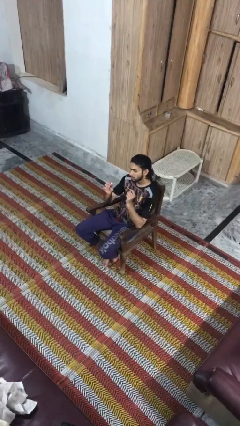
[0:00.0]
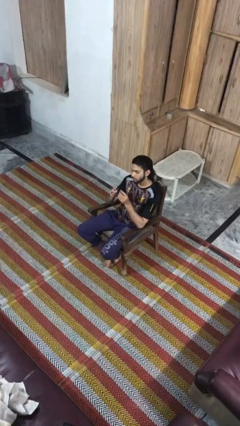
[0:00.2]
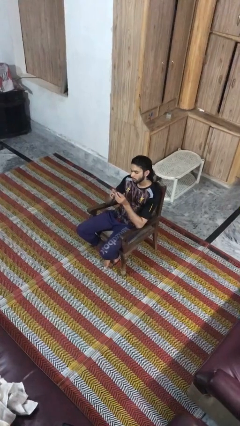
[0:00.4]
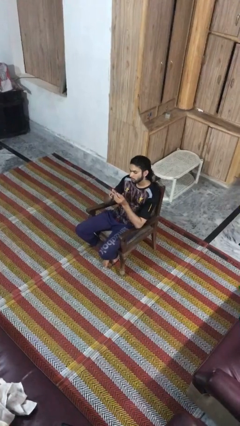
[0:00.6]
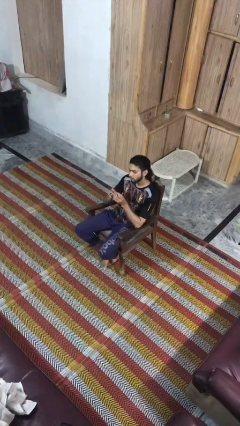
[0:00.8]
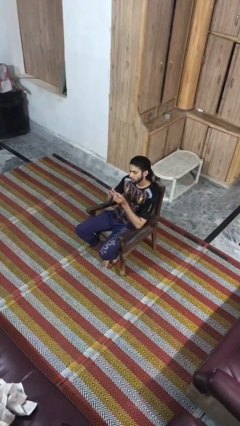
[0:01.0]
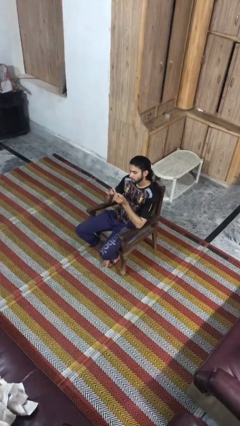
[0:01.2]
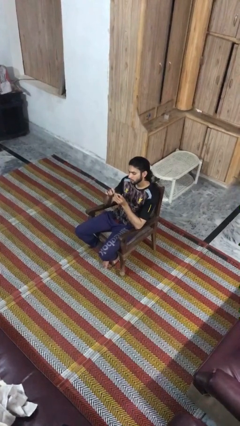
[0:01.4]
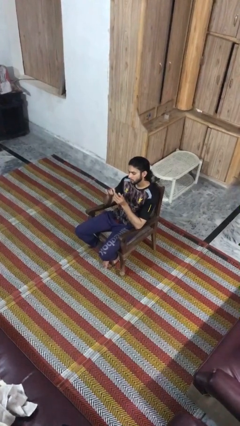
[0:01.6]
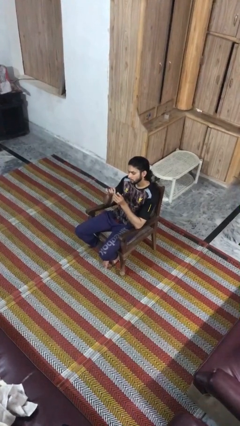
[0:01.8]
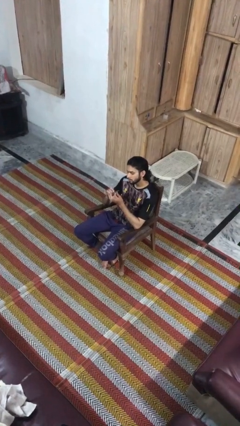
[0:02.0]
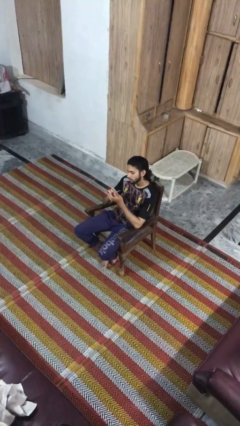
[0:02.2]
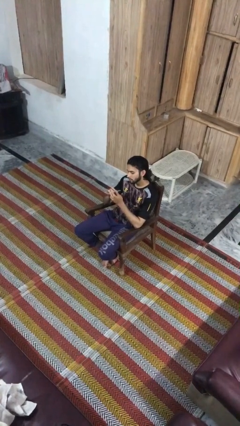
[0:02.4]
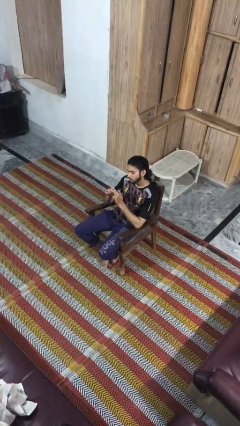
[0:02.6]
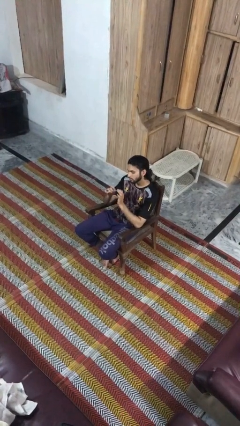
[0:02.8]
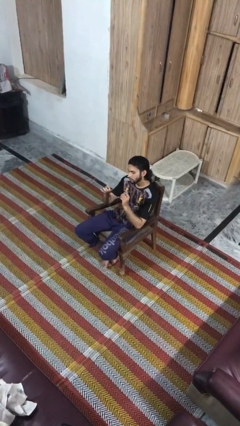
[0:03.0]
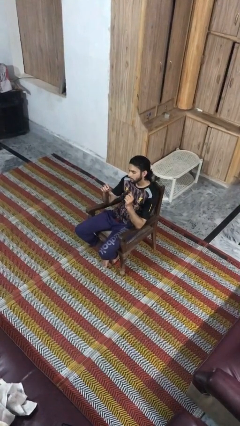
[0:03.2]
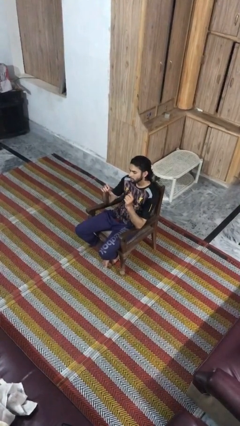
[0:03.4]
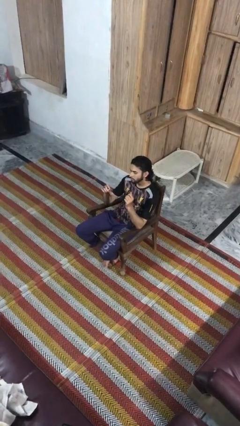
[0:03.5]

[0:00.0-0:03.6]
person files fingernails

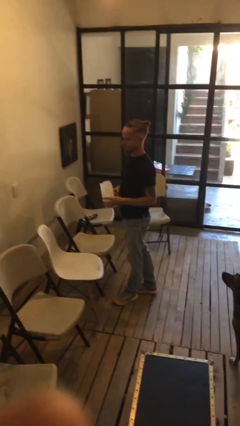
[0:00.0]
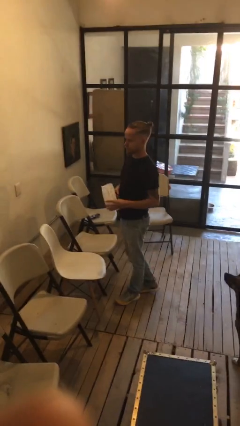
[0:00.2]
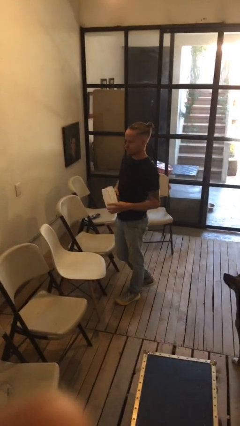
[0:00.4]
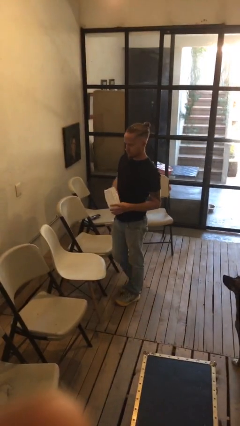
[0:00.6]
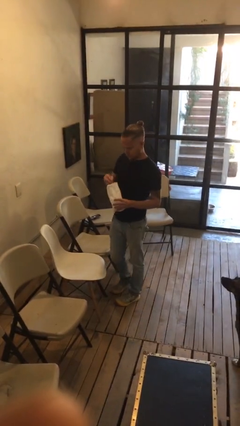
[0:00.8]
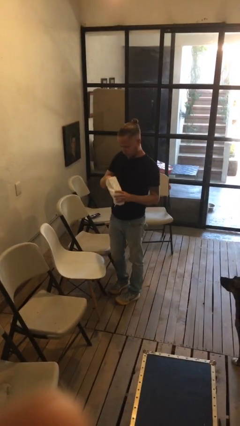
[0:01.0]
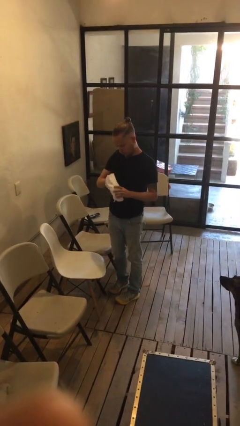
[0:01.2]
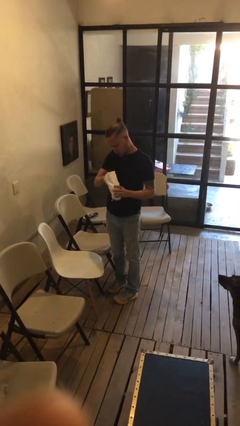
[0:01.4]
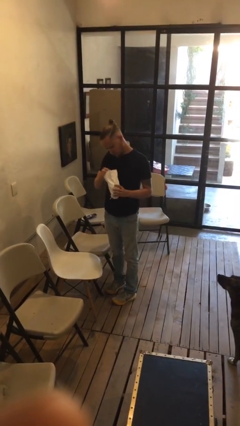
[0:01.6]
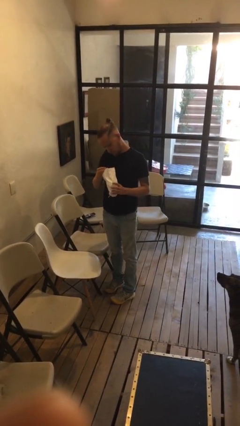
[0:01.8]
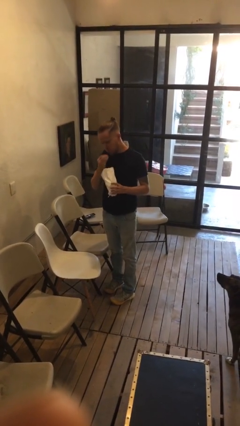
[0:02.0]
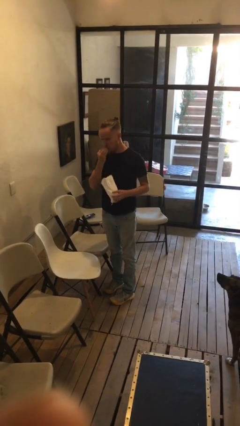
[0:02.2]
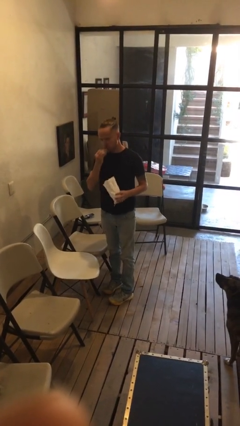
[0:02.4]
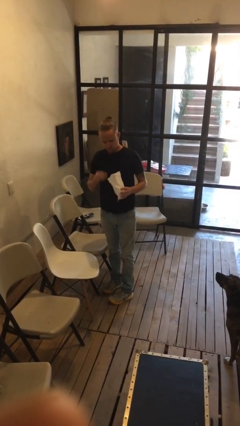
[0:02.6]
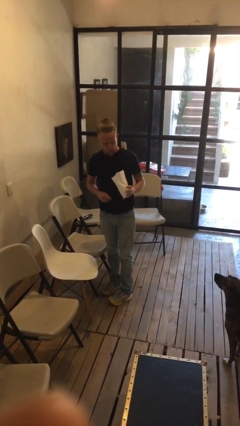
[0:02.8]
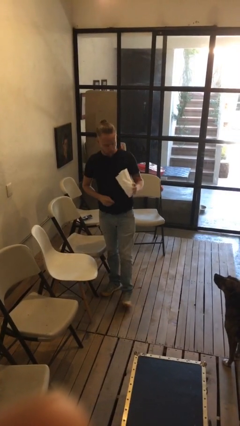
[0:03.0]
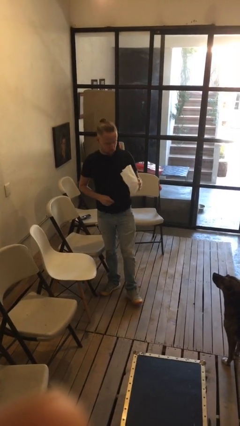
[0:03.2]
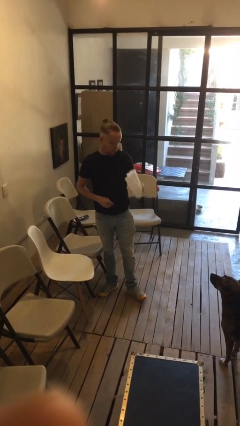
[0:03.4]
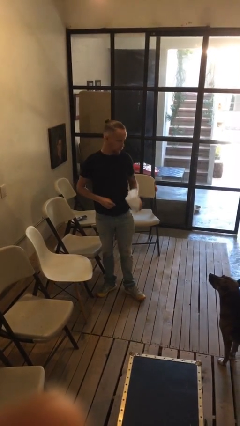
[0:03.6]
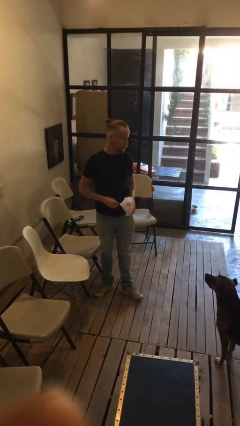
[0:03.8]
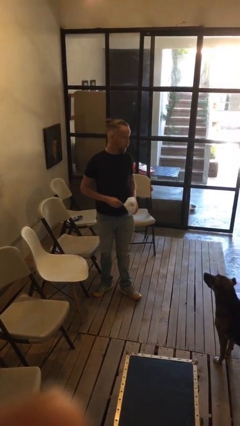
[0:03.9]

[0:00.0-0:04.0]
person eats snack from bag

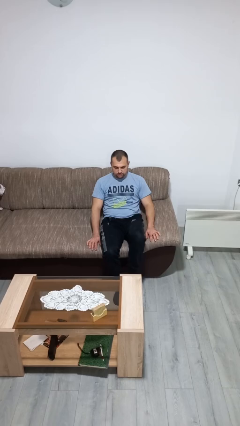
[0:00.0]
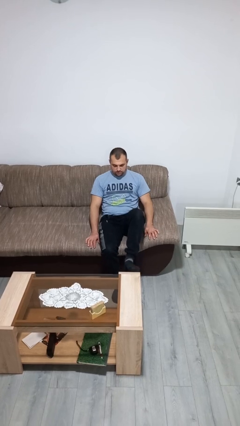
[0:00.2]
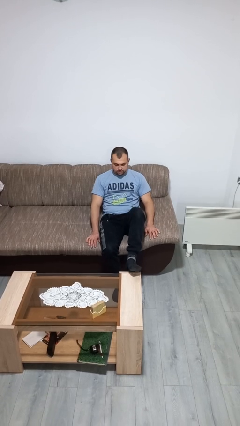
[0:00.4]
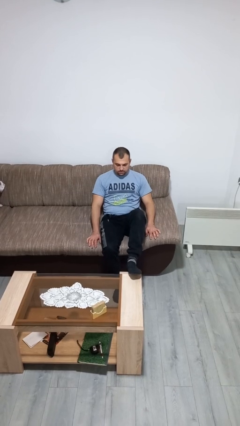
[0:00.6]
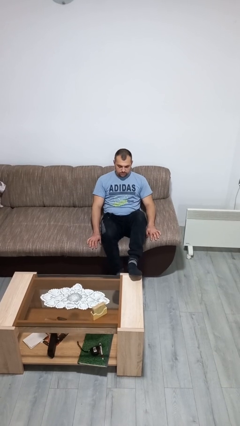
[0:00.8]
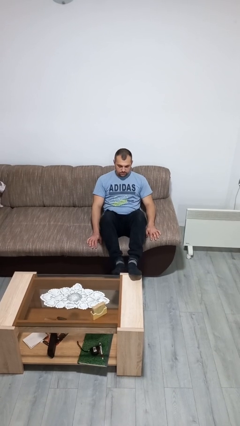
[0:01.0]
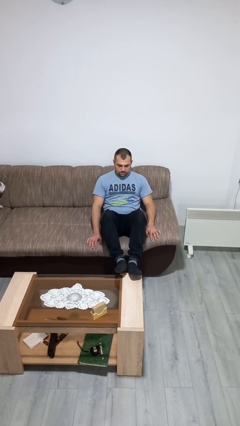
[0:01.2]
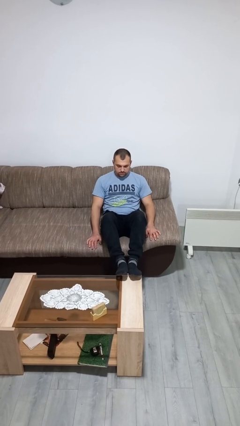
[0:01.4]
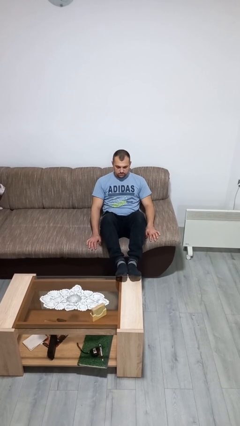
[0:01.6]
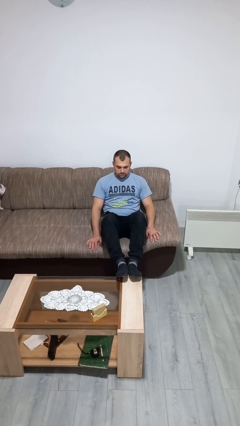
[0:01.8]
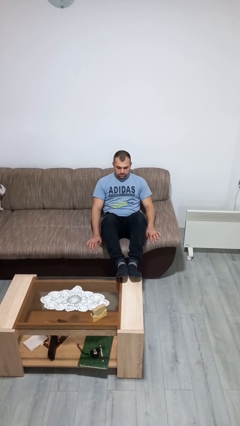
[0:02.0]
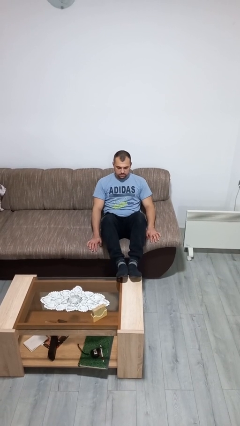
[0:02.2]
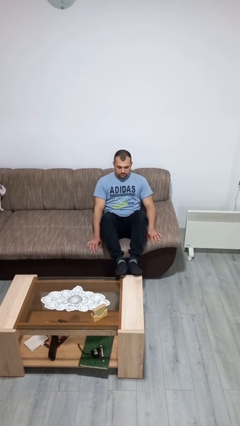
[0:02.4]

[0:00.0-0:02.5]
person puts feet up

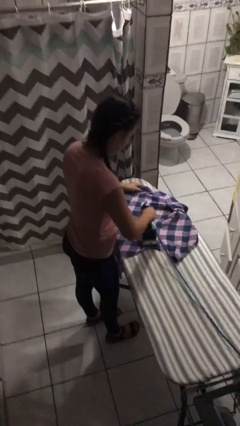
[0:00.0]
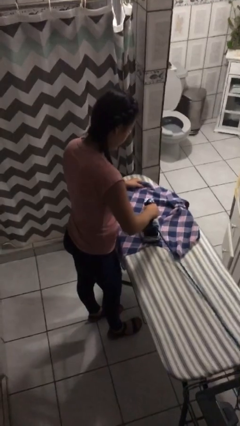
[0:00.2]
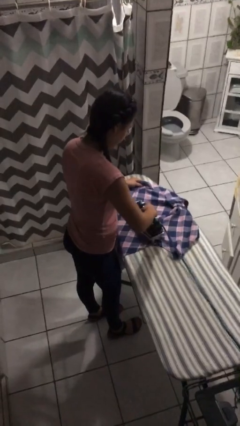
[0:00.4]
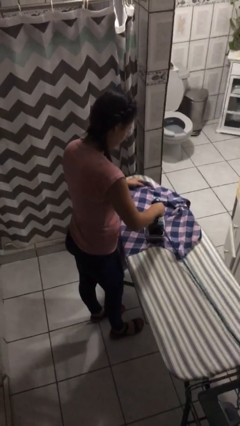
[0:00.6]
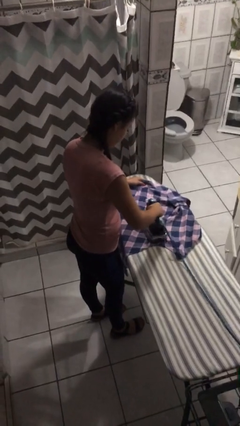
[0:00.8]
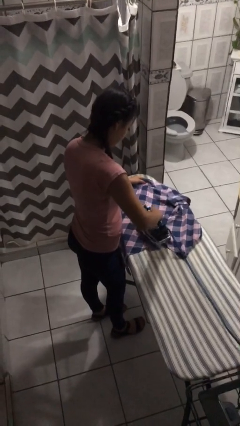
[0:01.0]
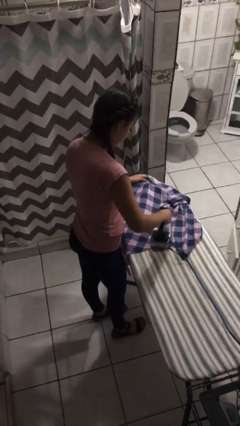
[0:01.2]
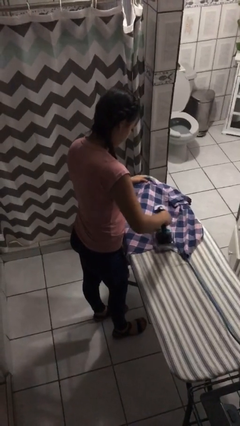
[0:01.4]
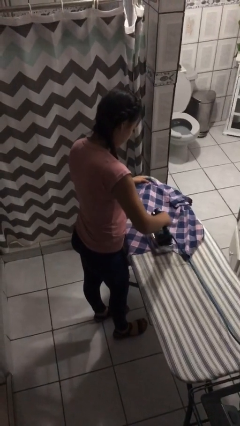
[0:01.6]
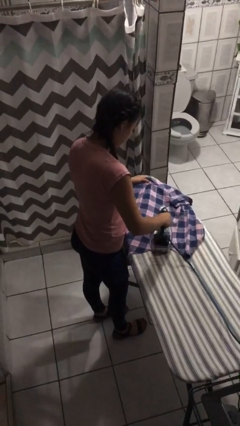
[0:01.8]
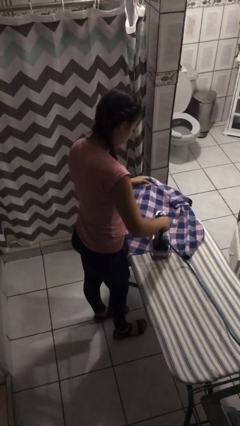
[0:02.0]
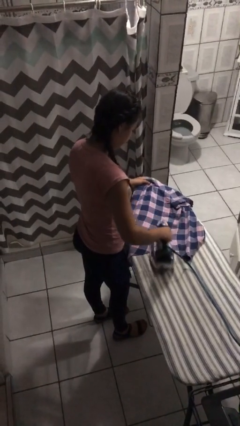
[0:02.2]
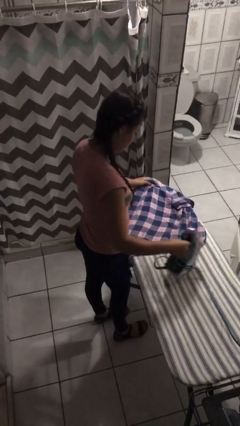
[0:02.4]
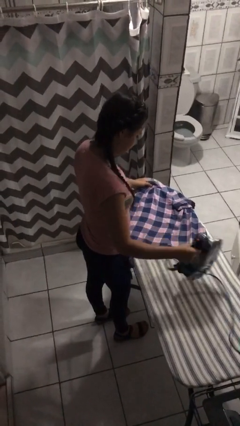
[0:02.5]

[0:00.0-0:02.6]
person irons clothes

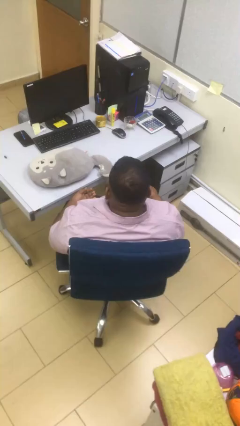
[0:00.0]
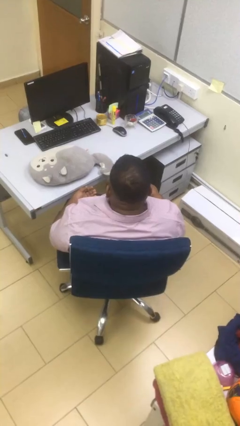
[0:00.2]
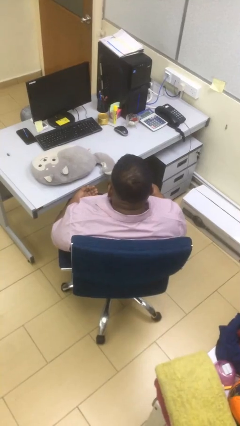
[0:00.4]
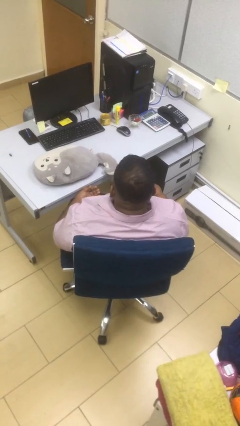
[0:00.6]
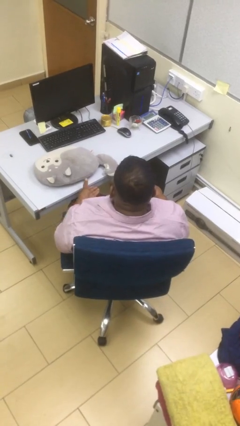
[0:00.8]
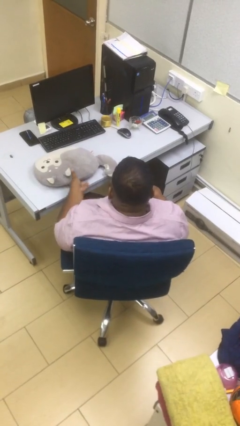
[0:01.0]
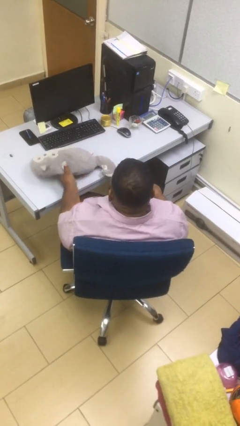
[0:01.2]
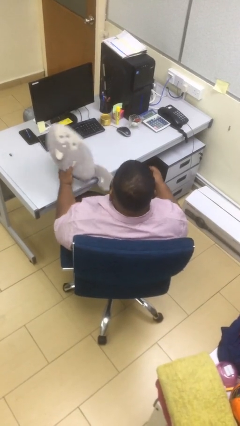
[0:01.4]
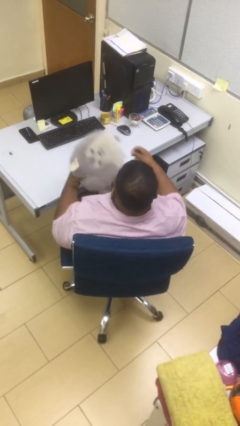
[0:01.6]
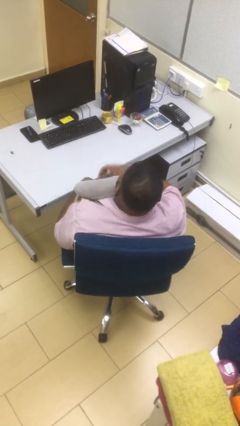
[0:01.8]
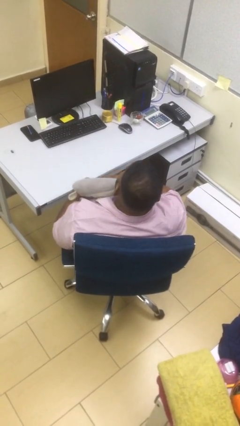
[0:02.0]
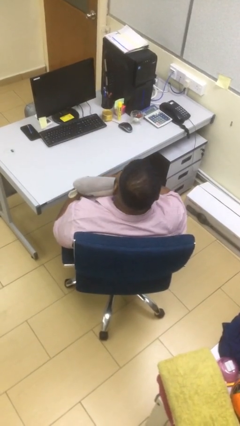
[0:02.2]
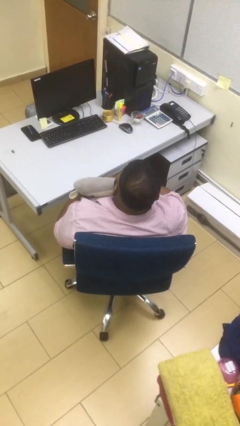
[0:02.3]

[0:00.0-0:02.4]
person hugs stuffed animal

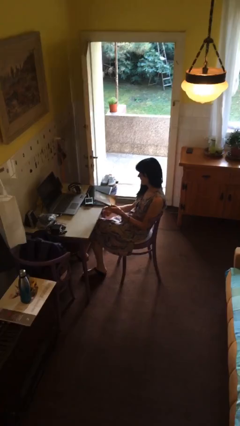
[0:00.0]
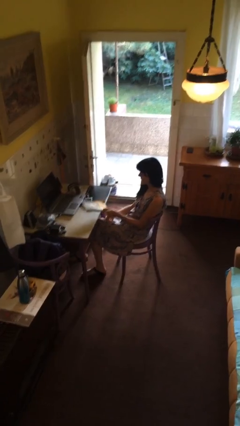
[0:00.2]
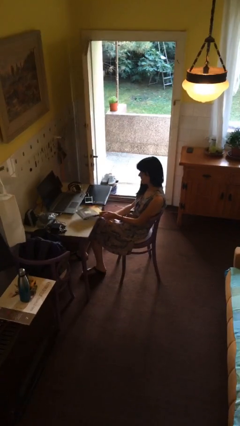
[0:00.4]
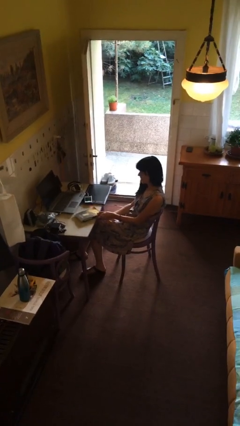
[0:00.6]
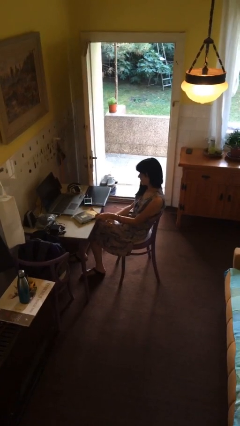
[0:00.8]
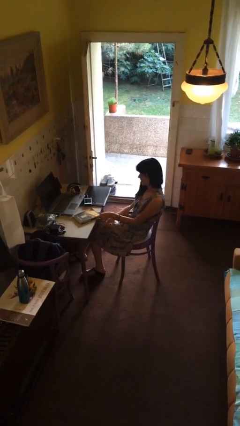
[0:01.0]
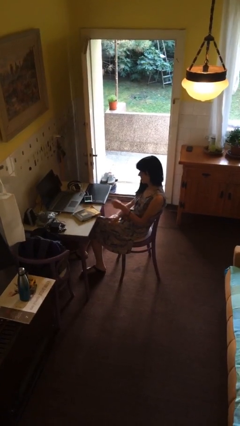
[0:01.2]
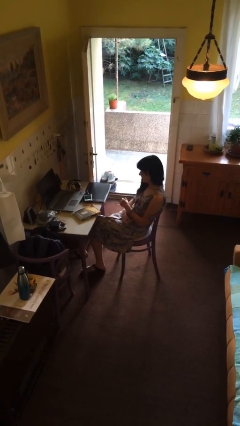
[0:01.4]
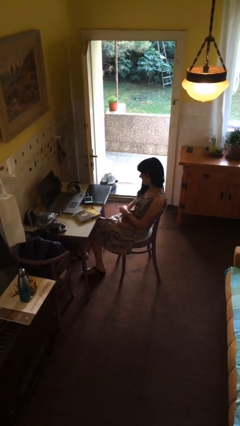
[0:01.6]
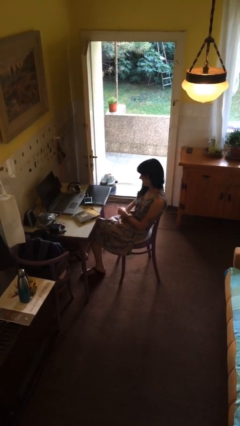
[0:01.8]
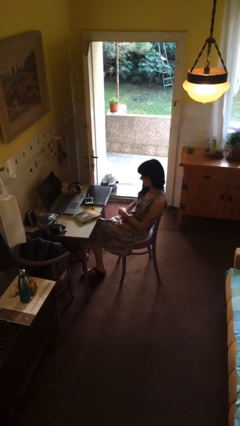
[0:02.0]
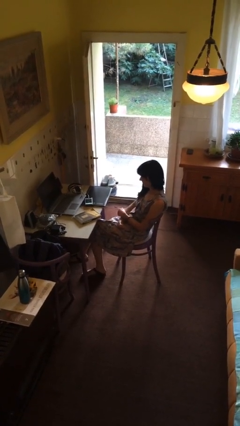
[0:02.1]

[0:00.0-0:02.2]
person puts down object on table
